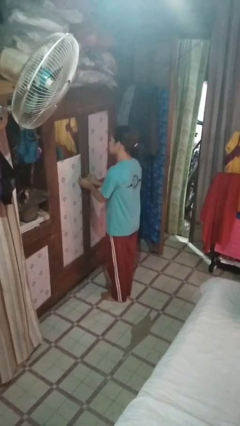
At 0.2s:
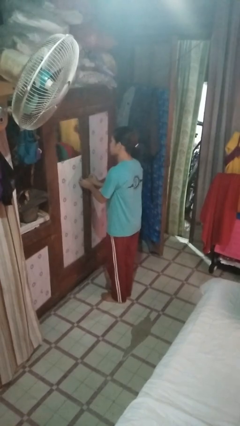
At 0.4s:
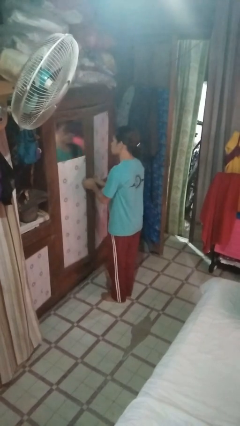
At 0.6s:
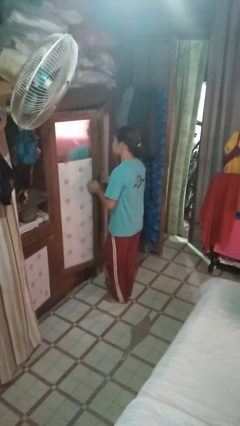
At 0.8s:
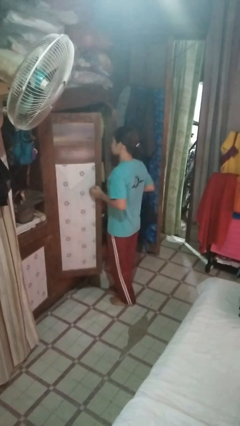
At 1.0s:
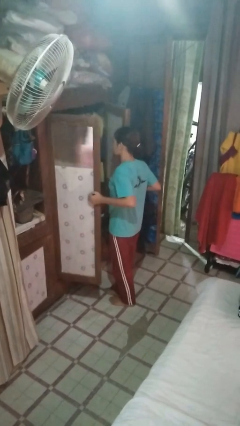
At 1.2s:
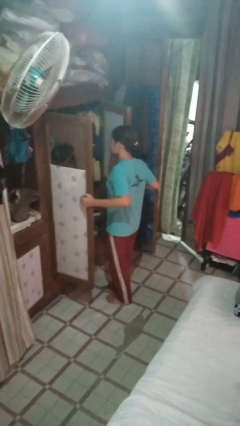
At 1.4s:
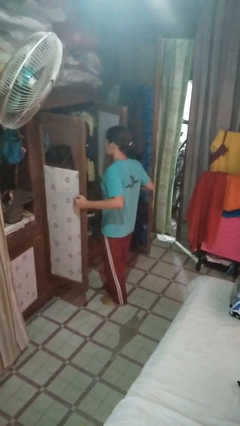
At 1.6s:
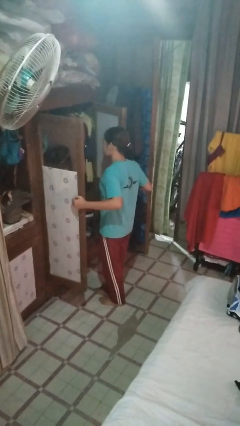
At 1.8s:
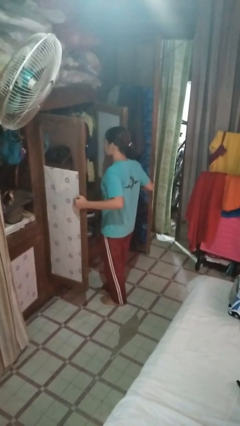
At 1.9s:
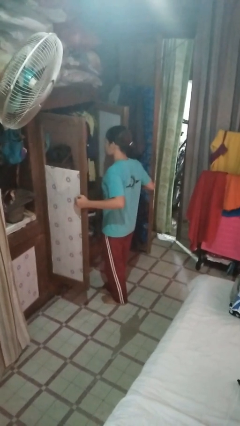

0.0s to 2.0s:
person opens closet door

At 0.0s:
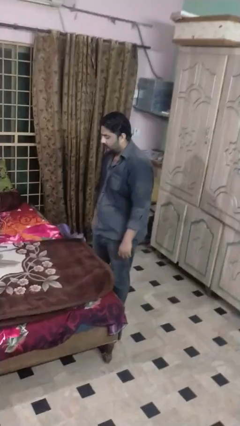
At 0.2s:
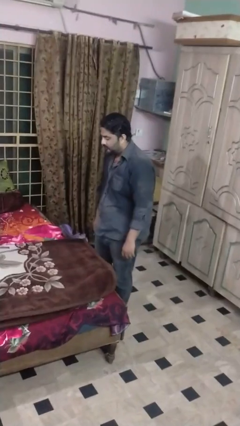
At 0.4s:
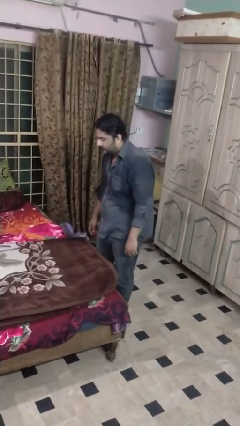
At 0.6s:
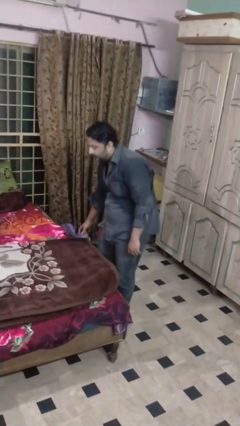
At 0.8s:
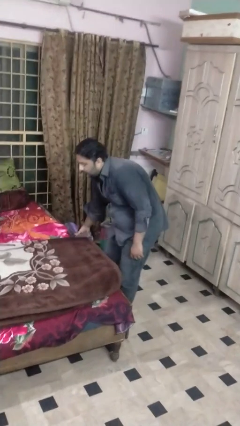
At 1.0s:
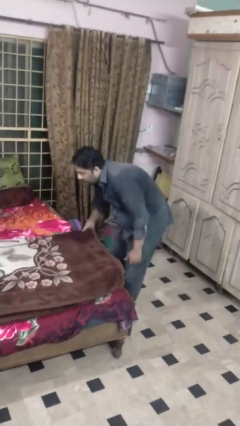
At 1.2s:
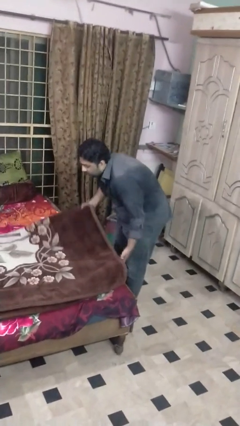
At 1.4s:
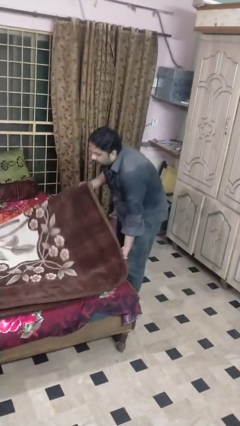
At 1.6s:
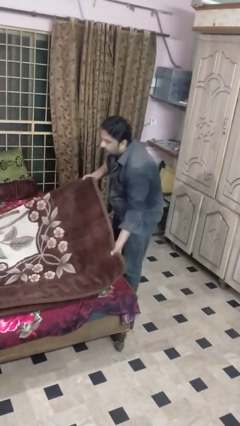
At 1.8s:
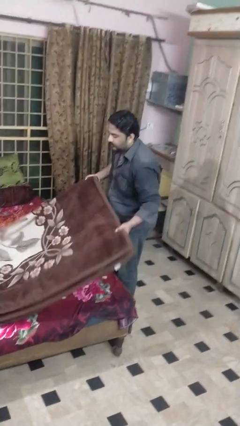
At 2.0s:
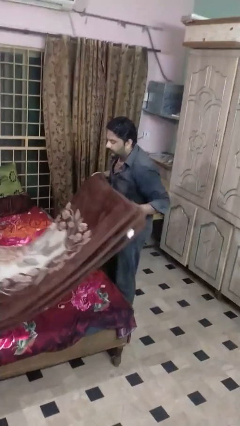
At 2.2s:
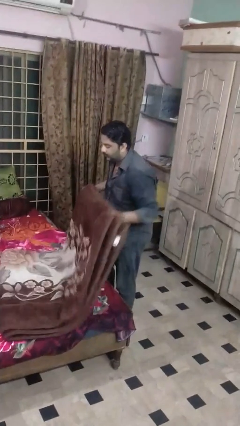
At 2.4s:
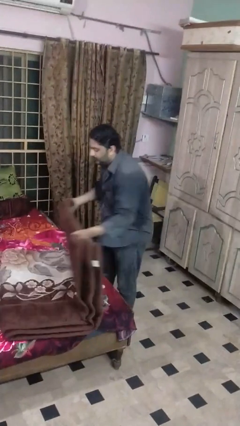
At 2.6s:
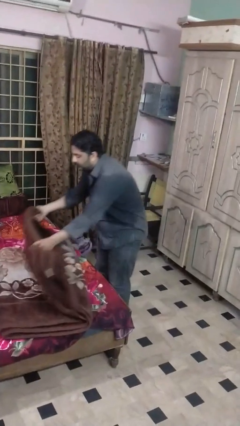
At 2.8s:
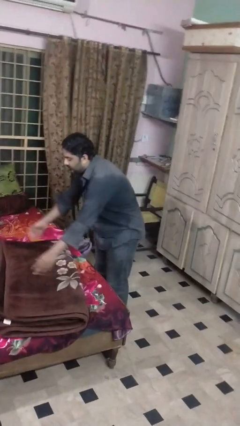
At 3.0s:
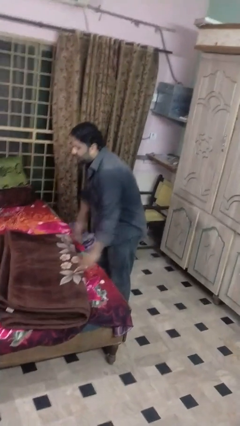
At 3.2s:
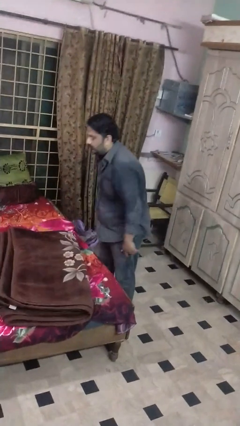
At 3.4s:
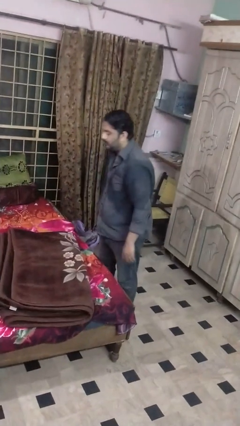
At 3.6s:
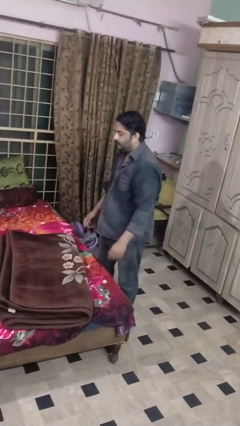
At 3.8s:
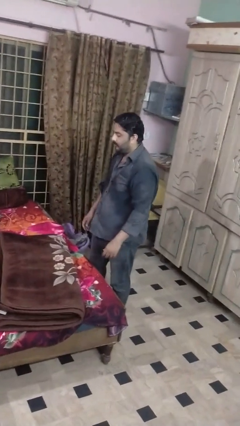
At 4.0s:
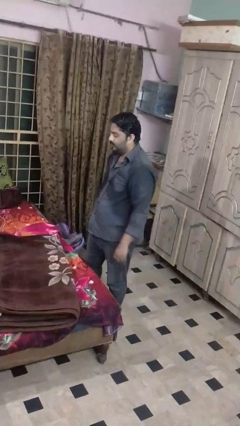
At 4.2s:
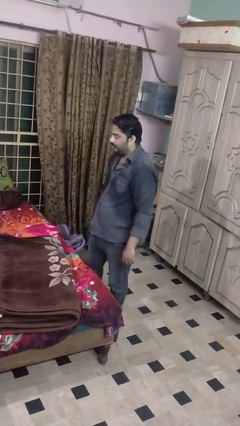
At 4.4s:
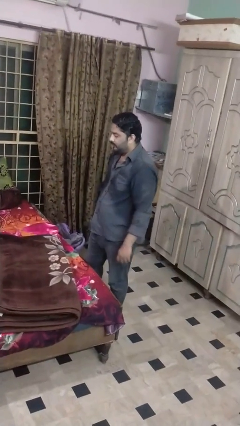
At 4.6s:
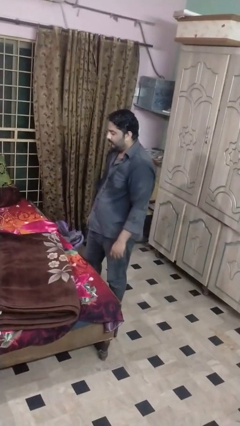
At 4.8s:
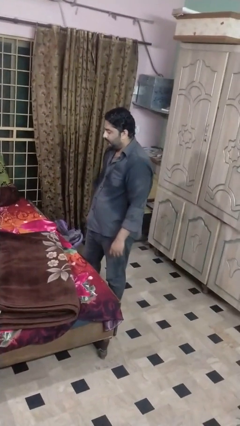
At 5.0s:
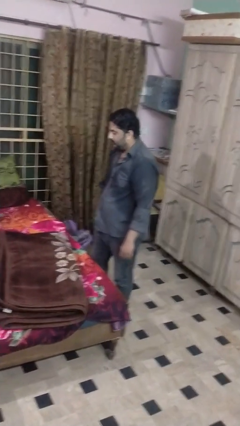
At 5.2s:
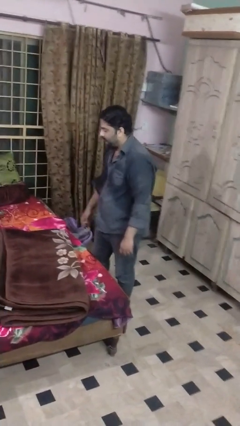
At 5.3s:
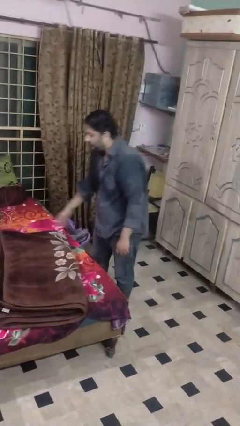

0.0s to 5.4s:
person folds blanket

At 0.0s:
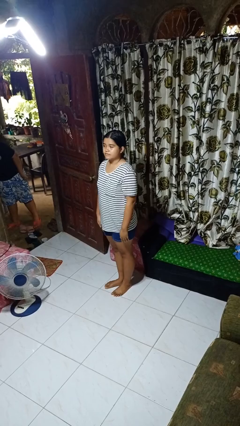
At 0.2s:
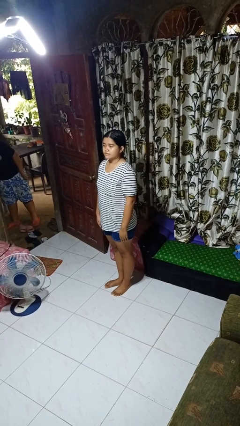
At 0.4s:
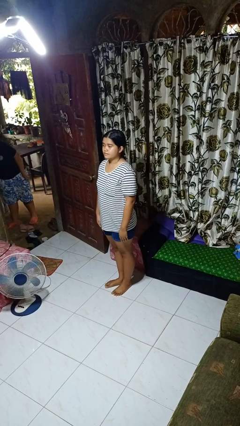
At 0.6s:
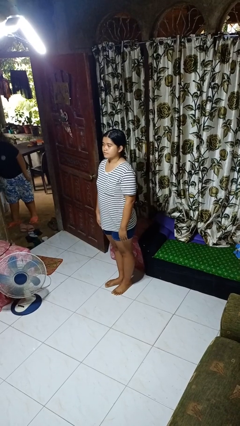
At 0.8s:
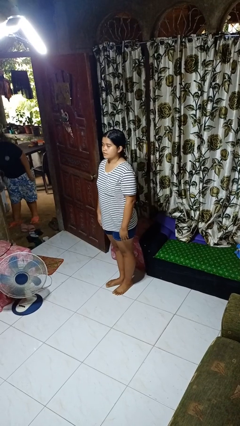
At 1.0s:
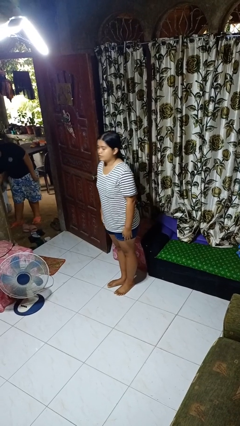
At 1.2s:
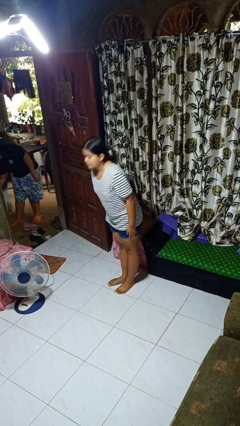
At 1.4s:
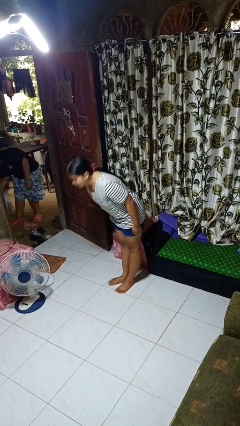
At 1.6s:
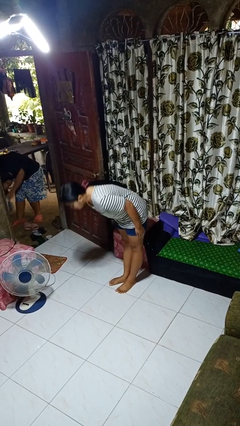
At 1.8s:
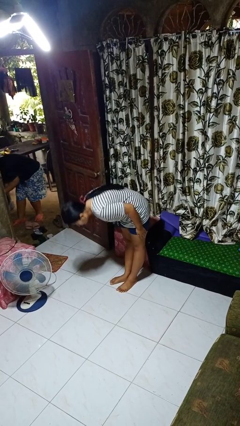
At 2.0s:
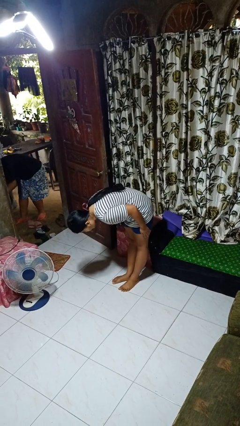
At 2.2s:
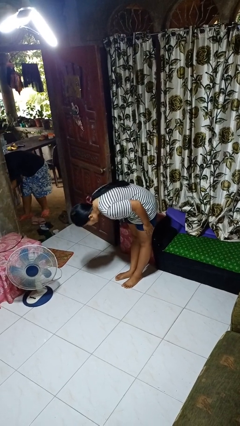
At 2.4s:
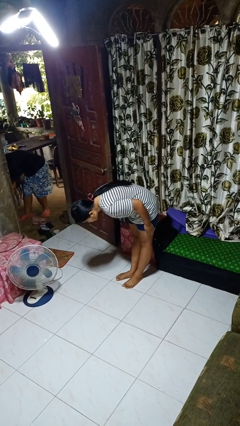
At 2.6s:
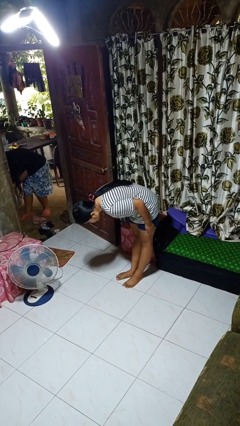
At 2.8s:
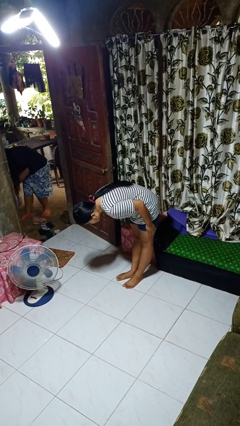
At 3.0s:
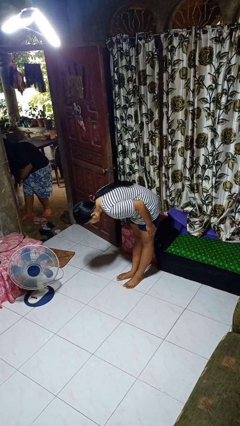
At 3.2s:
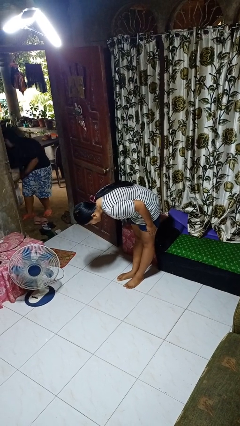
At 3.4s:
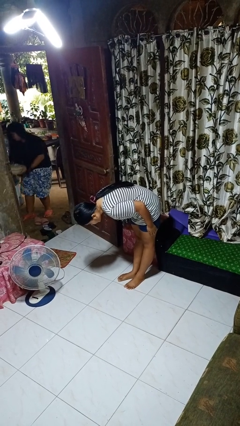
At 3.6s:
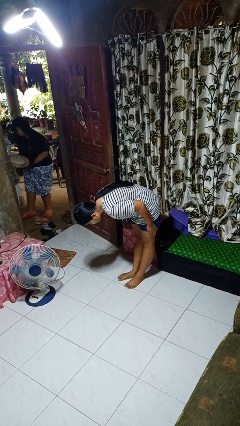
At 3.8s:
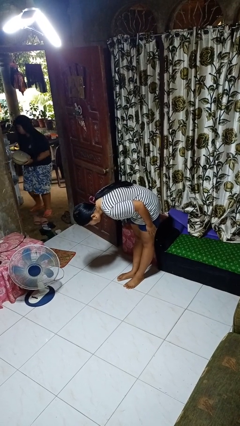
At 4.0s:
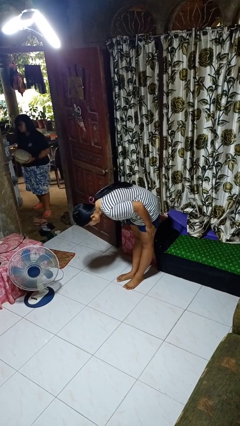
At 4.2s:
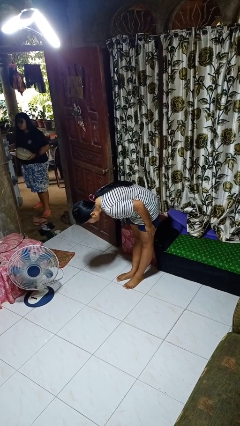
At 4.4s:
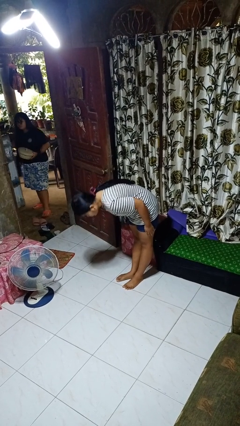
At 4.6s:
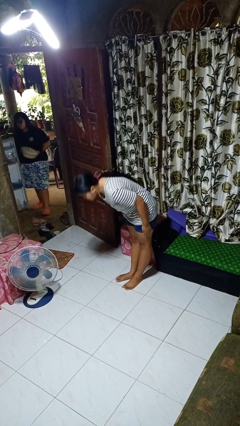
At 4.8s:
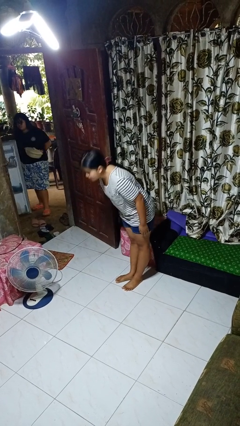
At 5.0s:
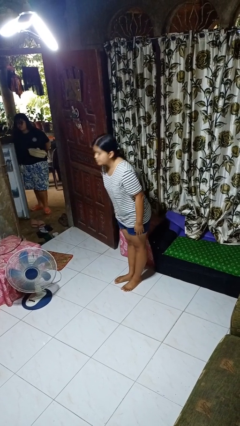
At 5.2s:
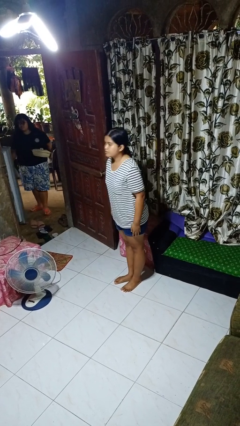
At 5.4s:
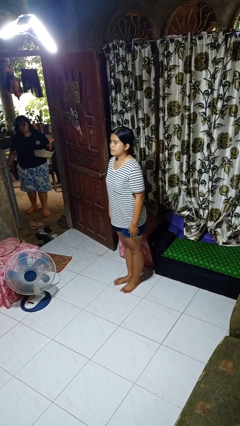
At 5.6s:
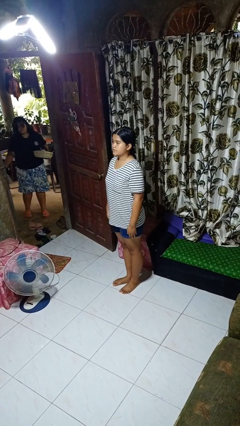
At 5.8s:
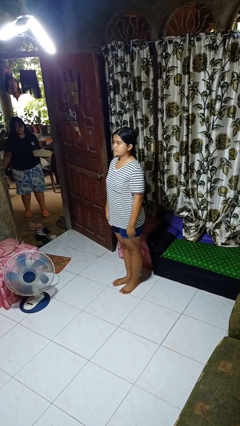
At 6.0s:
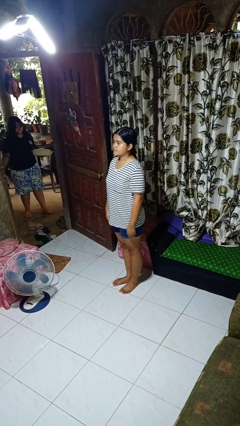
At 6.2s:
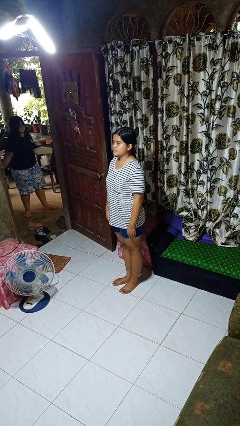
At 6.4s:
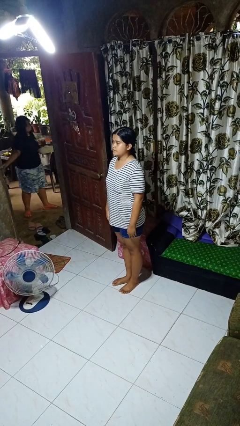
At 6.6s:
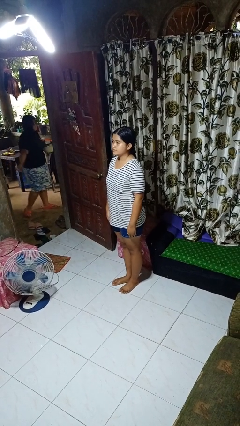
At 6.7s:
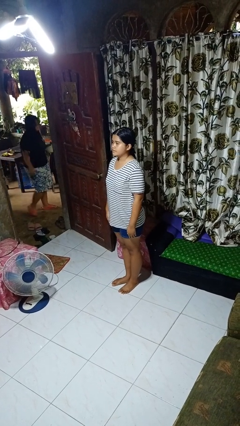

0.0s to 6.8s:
person bows

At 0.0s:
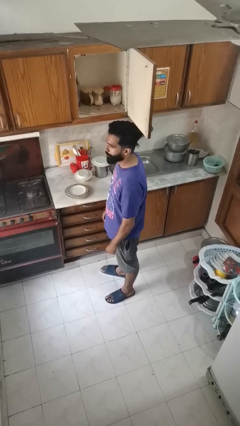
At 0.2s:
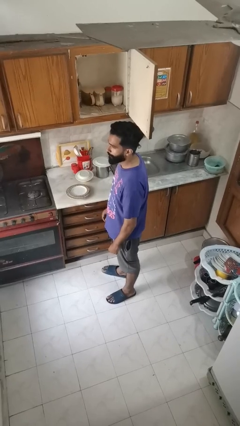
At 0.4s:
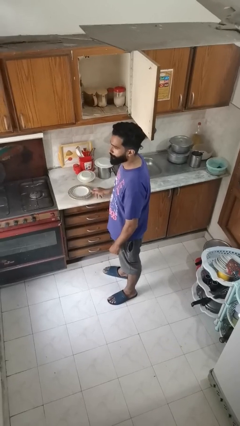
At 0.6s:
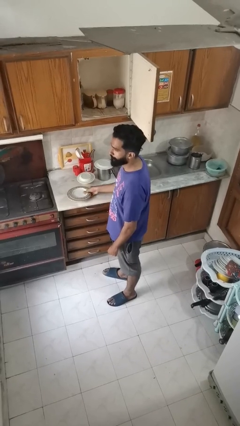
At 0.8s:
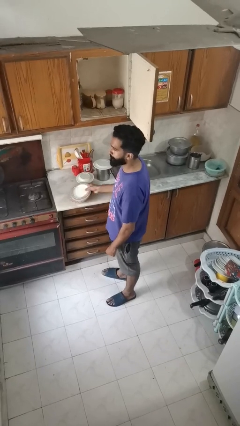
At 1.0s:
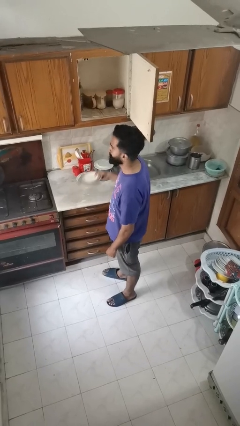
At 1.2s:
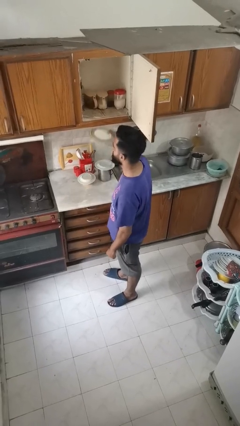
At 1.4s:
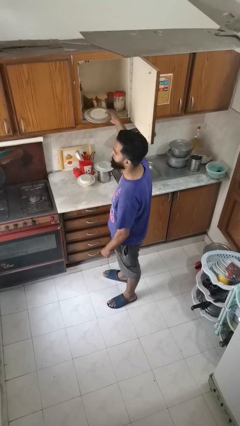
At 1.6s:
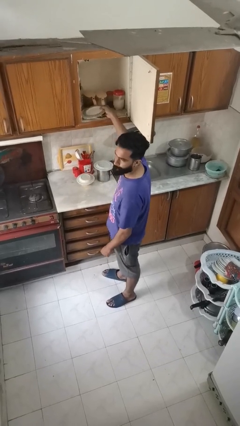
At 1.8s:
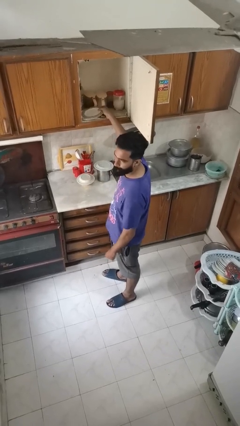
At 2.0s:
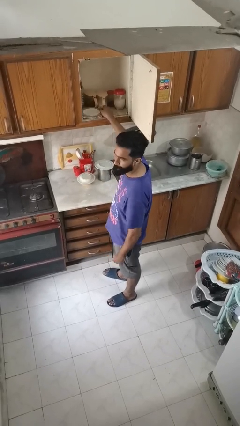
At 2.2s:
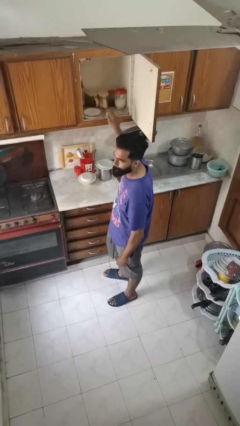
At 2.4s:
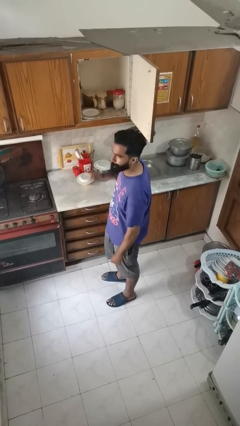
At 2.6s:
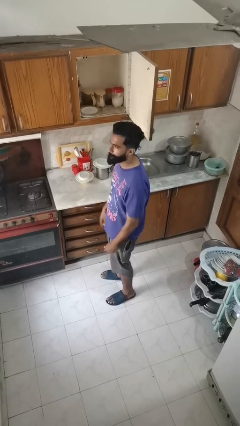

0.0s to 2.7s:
person puts object in cabinet

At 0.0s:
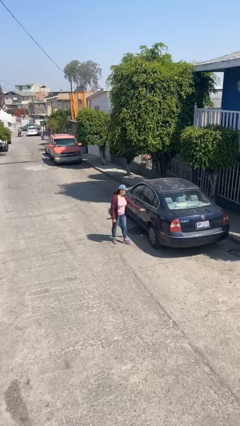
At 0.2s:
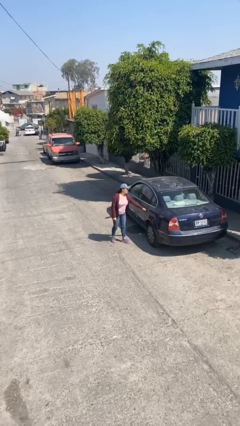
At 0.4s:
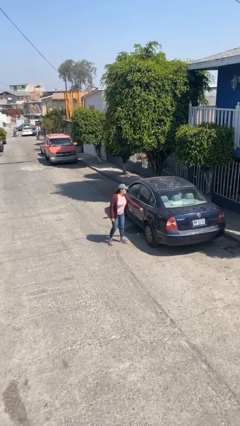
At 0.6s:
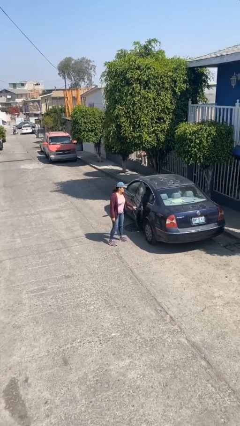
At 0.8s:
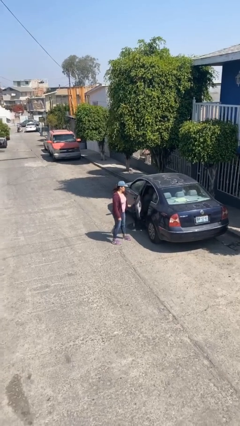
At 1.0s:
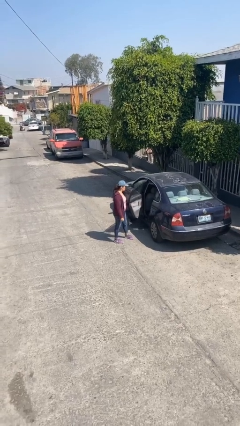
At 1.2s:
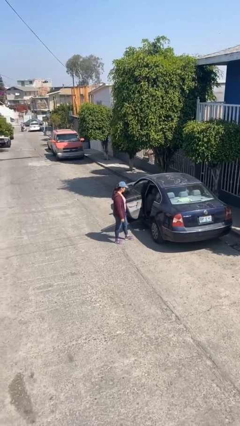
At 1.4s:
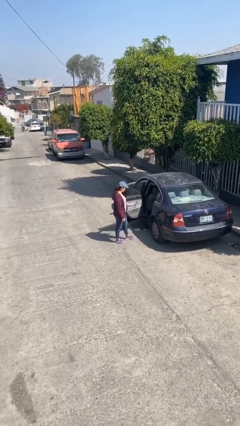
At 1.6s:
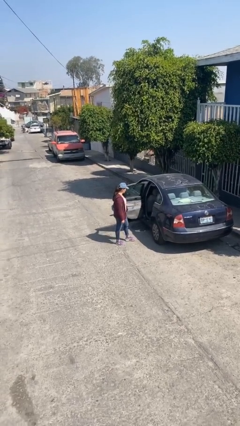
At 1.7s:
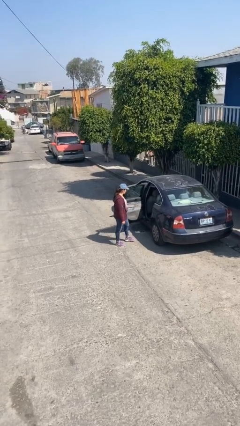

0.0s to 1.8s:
person opens car door
